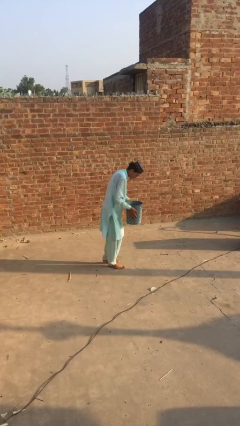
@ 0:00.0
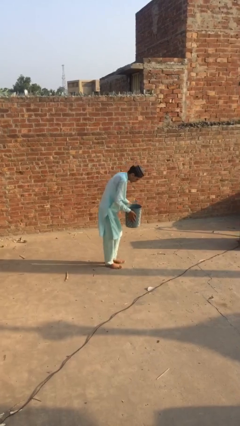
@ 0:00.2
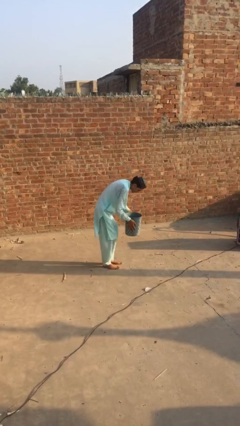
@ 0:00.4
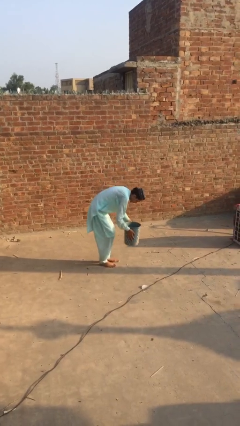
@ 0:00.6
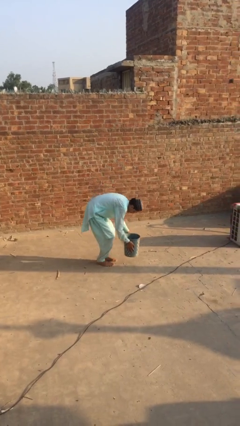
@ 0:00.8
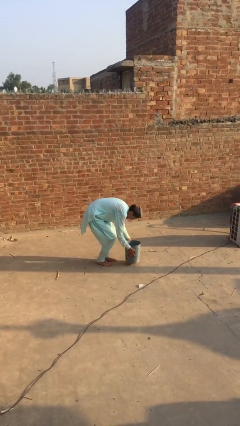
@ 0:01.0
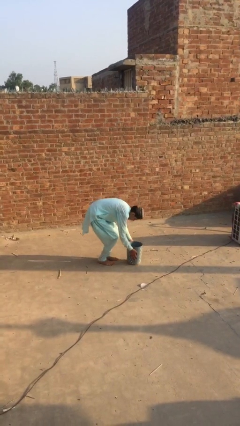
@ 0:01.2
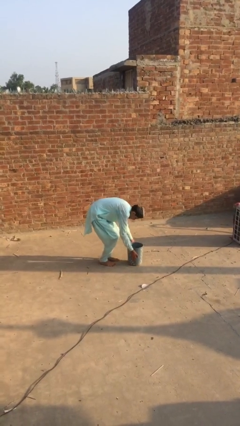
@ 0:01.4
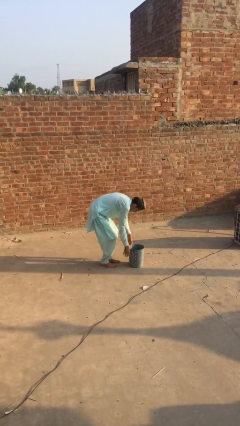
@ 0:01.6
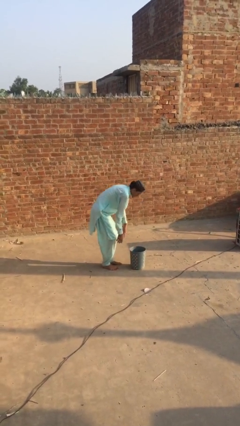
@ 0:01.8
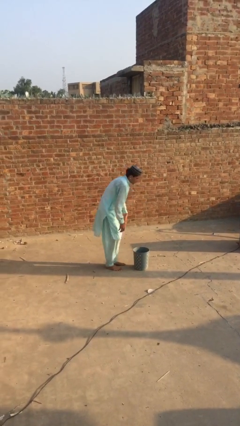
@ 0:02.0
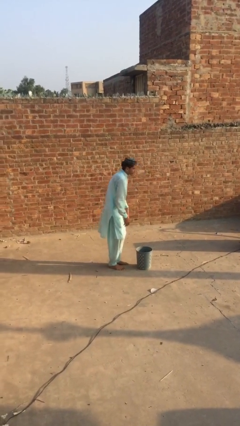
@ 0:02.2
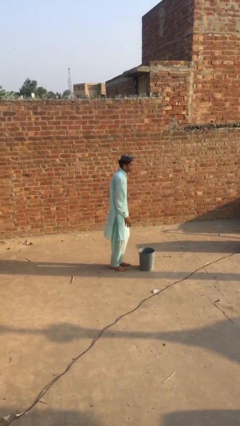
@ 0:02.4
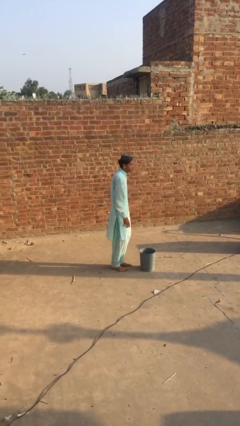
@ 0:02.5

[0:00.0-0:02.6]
person puts down object on floor

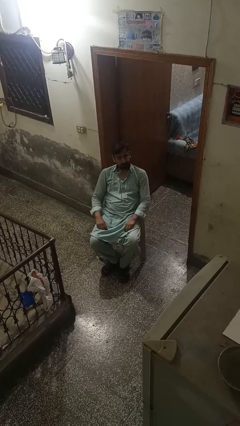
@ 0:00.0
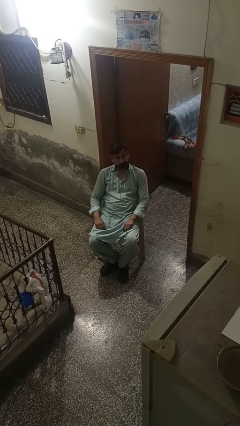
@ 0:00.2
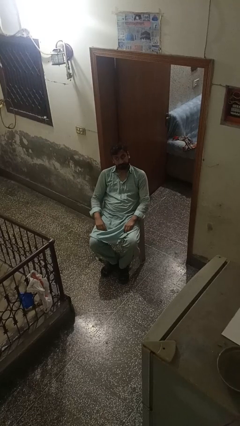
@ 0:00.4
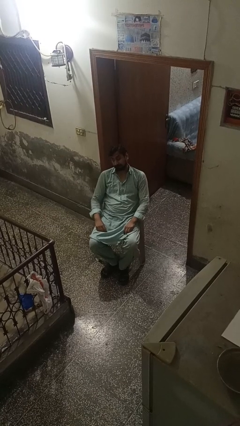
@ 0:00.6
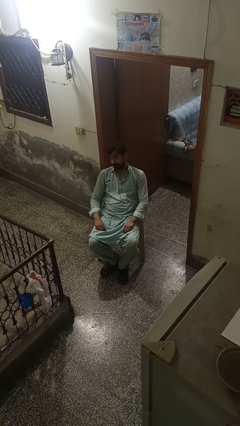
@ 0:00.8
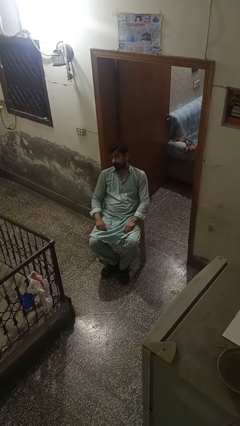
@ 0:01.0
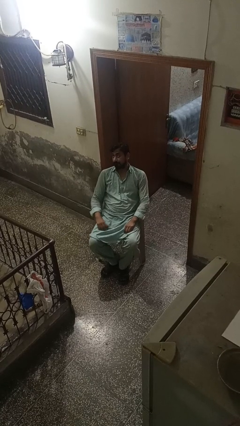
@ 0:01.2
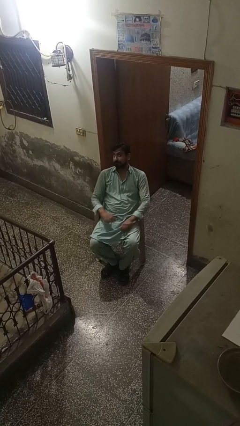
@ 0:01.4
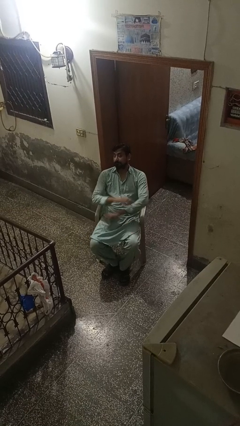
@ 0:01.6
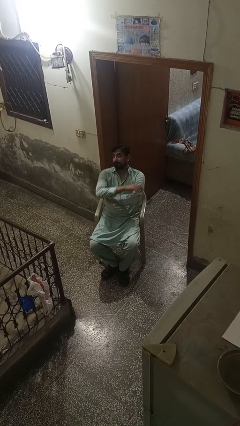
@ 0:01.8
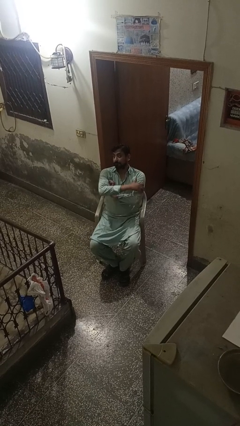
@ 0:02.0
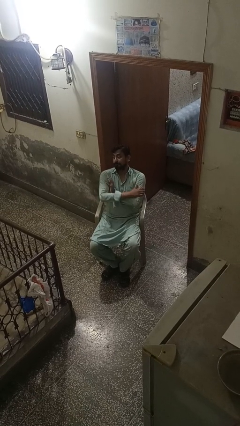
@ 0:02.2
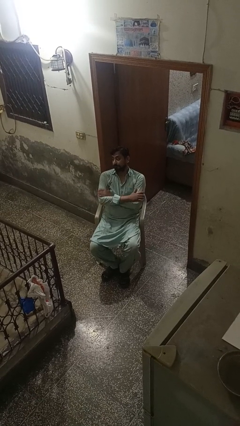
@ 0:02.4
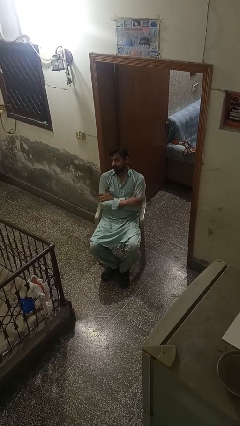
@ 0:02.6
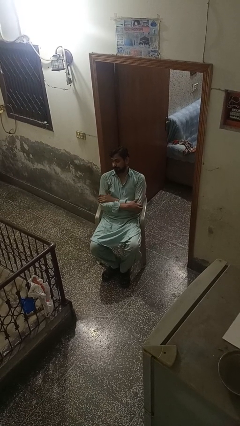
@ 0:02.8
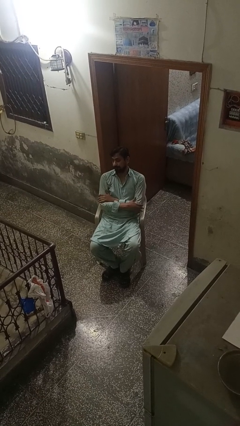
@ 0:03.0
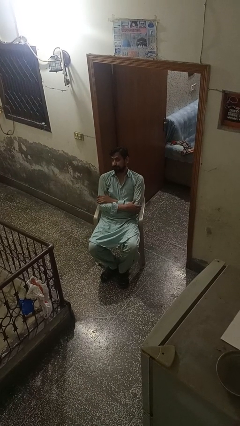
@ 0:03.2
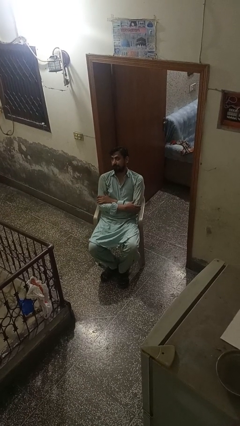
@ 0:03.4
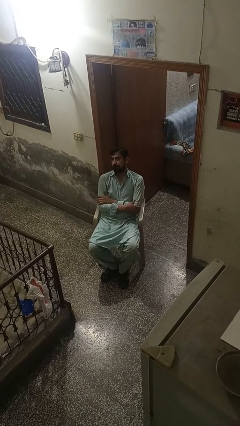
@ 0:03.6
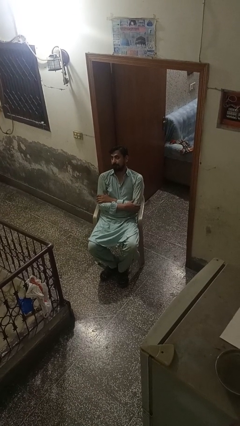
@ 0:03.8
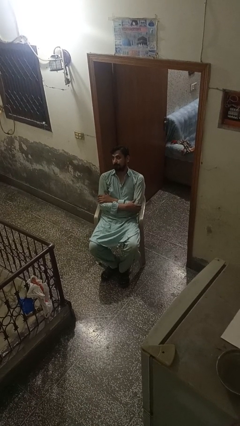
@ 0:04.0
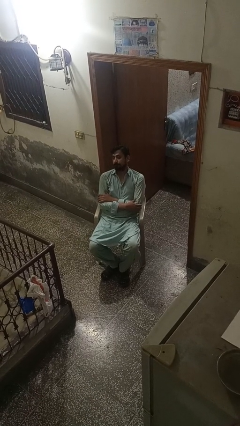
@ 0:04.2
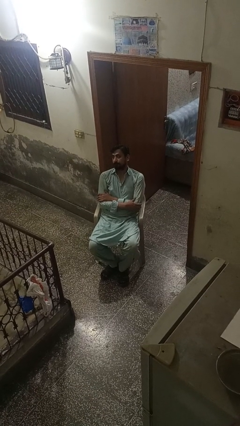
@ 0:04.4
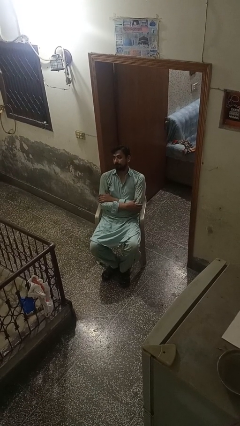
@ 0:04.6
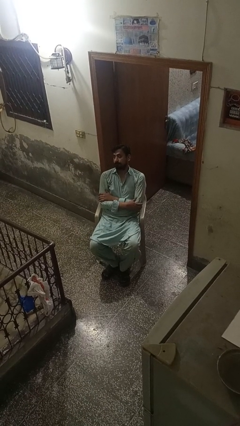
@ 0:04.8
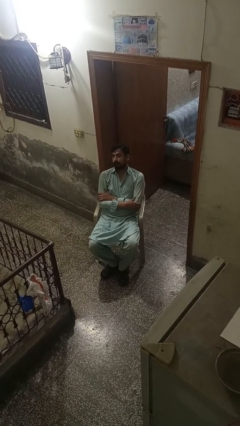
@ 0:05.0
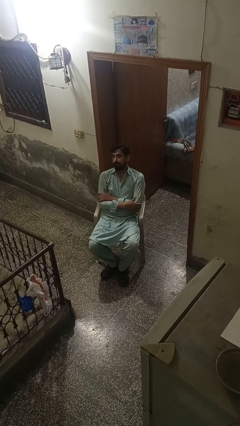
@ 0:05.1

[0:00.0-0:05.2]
person crosses arms

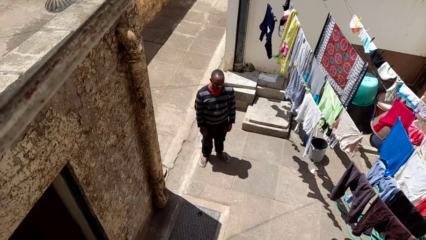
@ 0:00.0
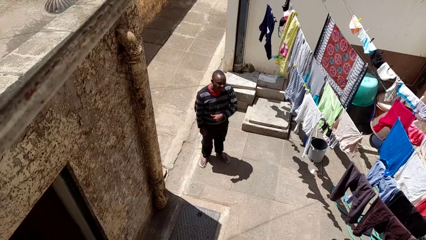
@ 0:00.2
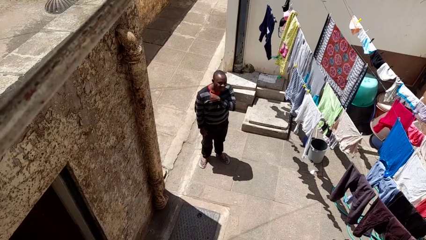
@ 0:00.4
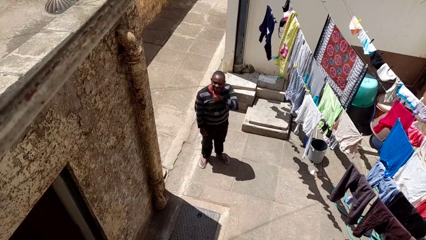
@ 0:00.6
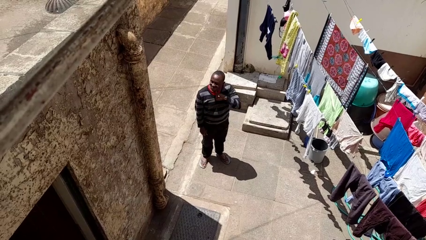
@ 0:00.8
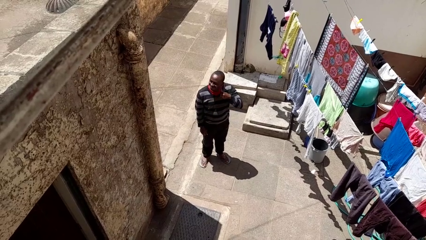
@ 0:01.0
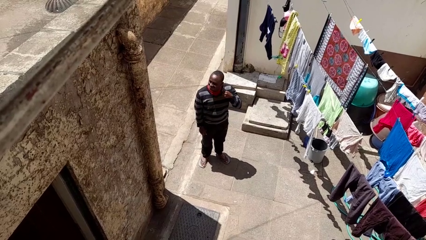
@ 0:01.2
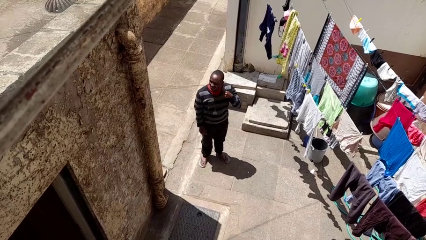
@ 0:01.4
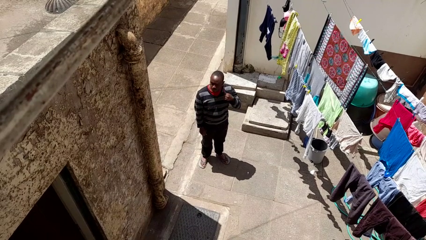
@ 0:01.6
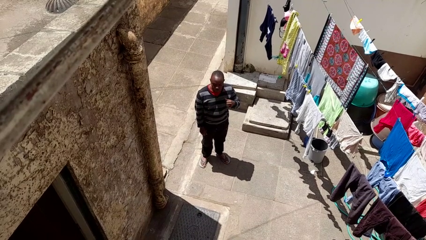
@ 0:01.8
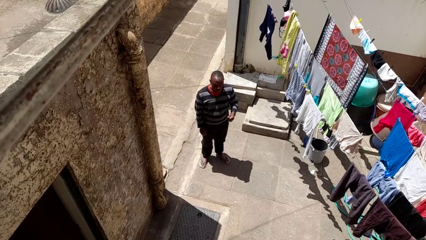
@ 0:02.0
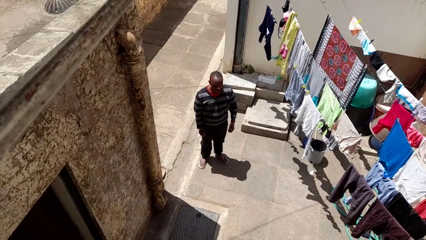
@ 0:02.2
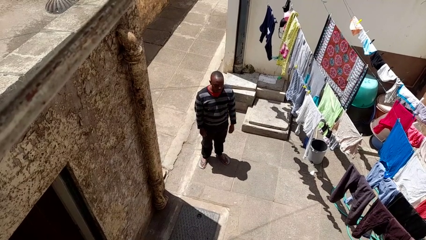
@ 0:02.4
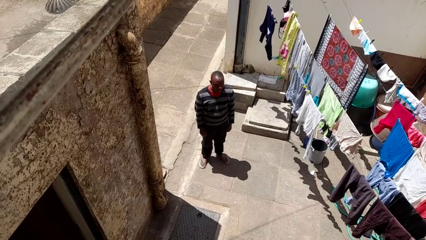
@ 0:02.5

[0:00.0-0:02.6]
person gestures cut

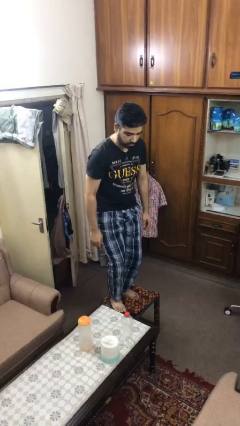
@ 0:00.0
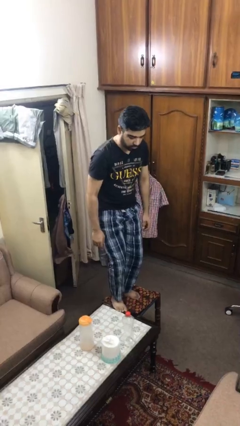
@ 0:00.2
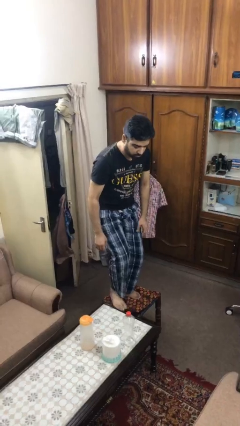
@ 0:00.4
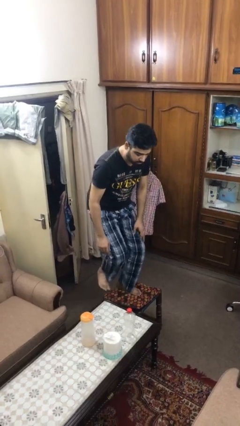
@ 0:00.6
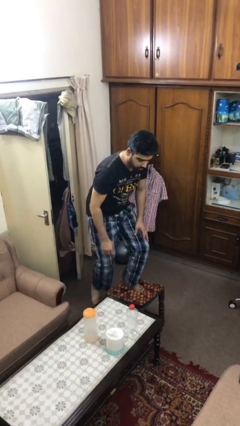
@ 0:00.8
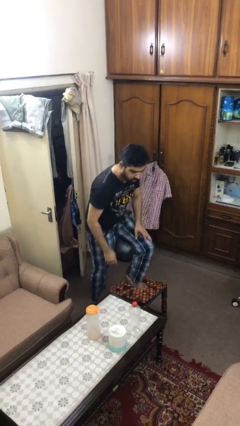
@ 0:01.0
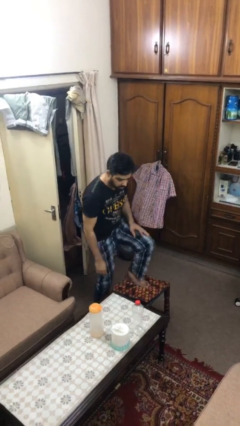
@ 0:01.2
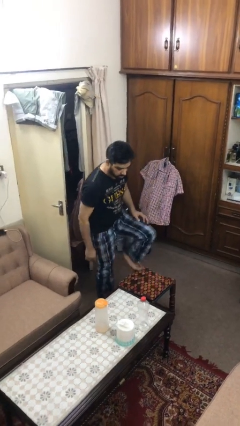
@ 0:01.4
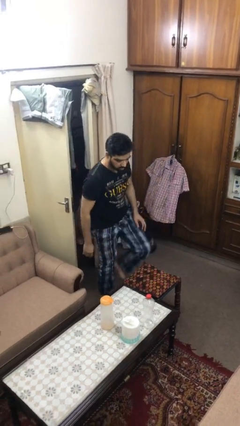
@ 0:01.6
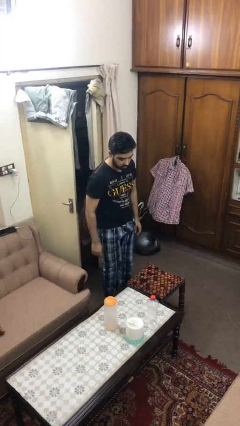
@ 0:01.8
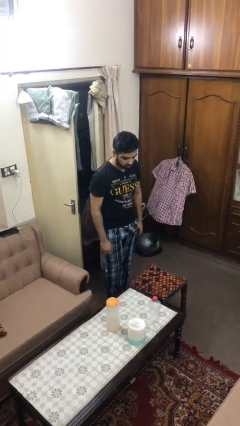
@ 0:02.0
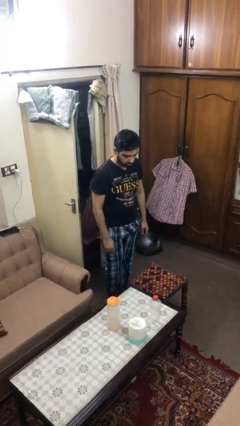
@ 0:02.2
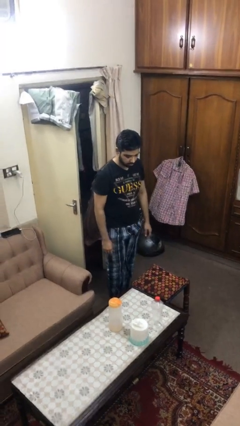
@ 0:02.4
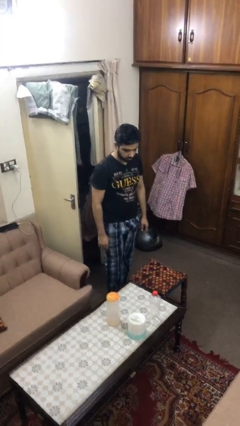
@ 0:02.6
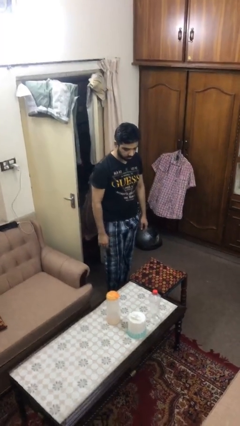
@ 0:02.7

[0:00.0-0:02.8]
person climbs off table

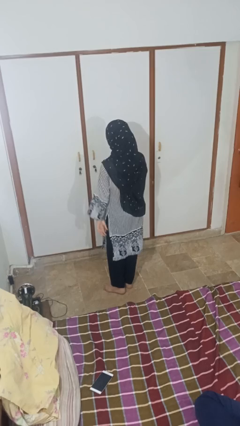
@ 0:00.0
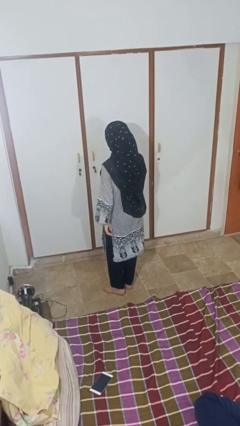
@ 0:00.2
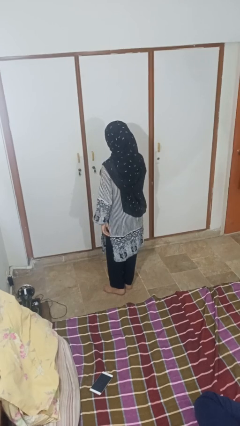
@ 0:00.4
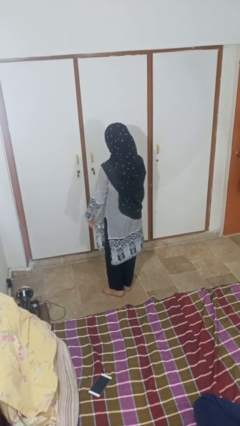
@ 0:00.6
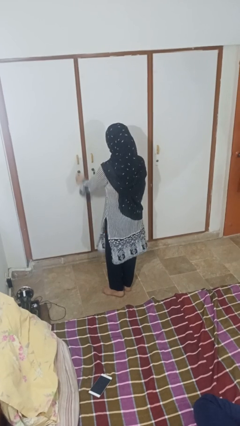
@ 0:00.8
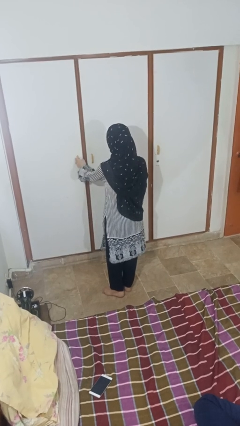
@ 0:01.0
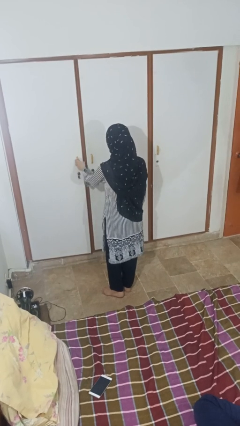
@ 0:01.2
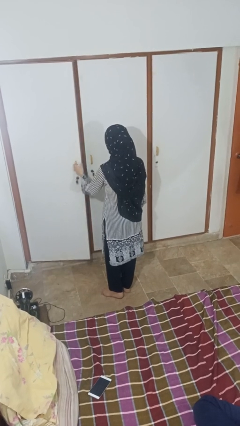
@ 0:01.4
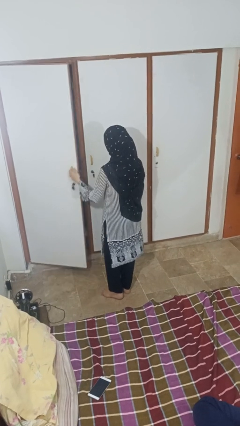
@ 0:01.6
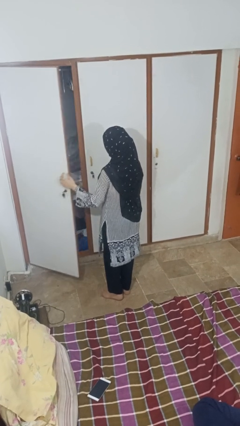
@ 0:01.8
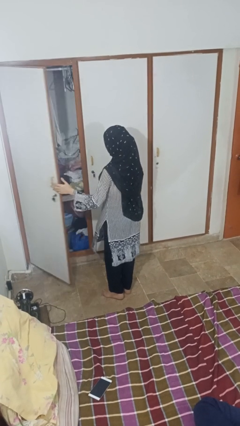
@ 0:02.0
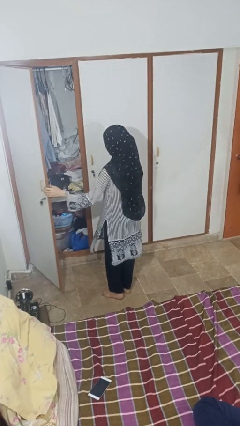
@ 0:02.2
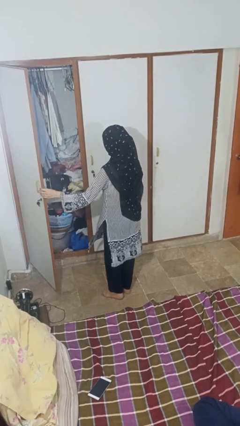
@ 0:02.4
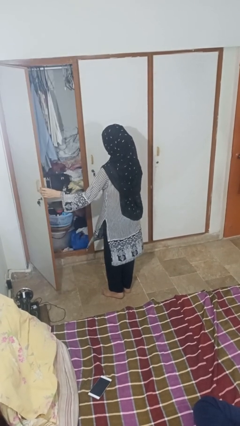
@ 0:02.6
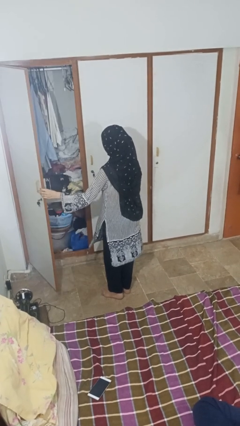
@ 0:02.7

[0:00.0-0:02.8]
person opens closet door

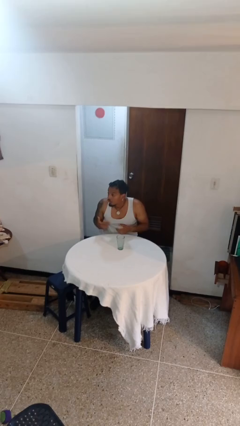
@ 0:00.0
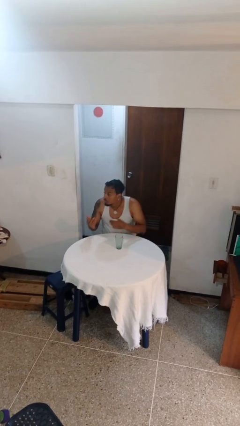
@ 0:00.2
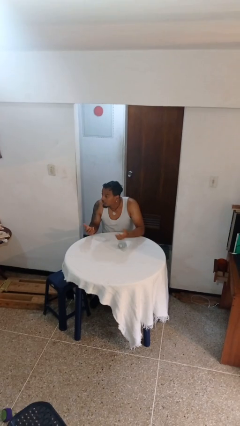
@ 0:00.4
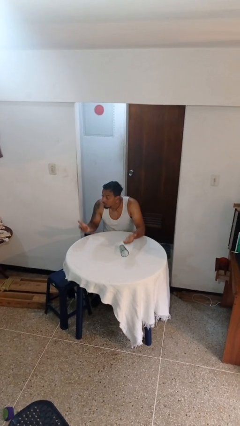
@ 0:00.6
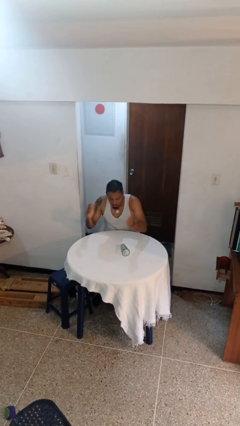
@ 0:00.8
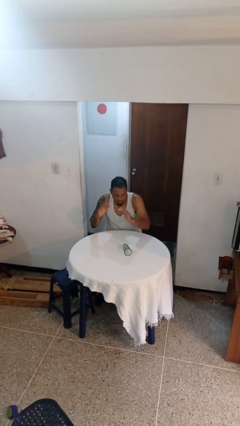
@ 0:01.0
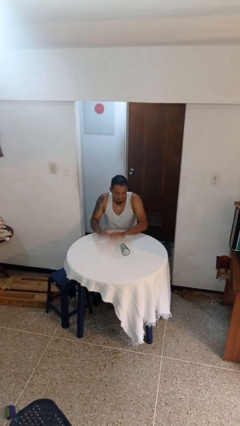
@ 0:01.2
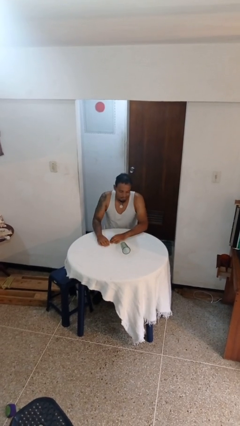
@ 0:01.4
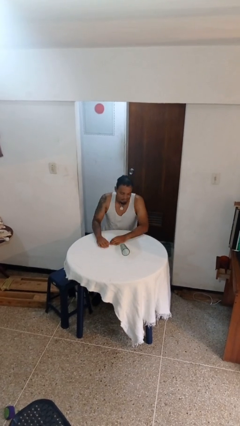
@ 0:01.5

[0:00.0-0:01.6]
person knocks over glass
